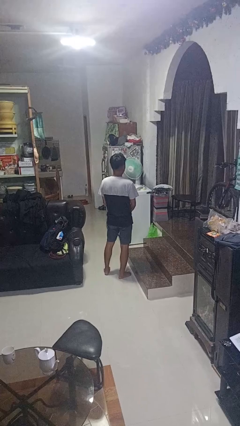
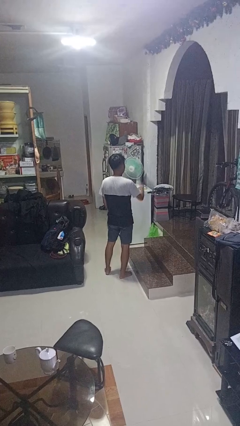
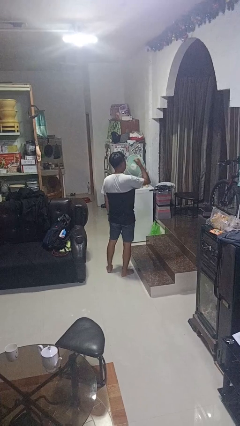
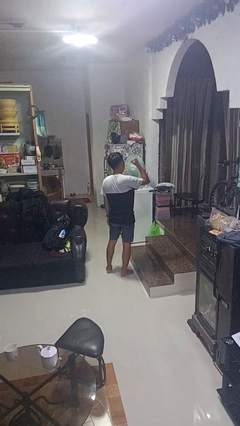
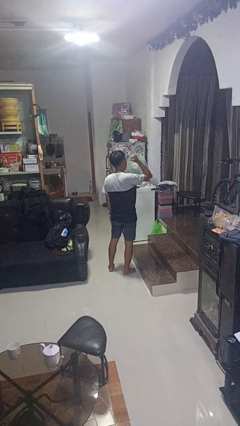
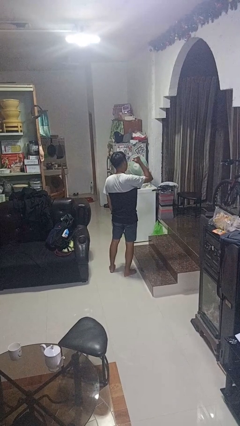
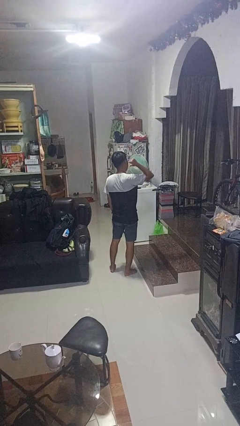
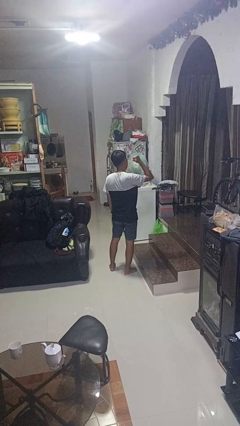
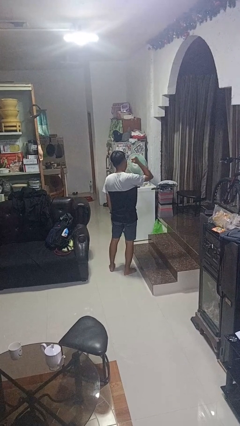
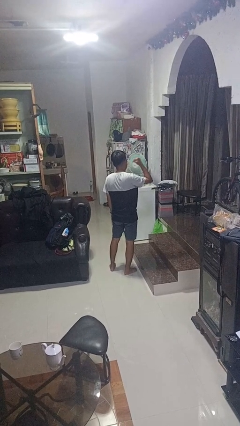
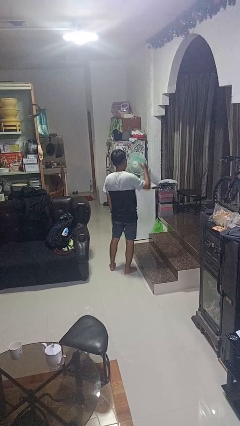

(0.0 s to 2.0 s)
person gestures behind me

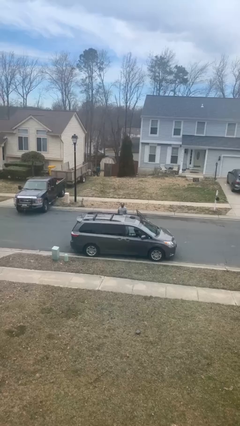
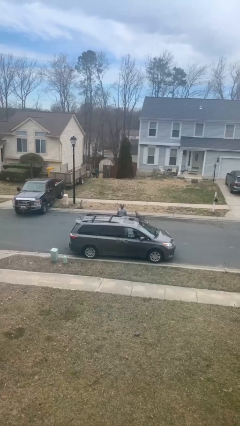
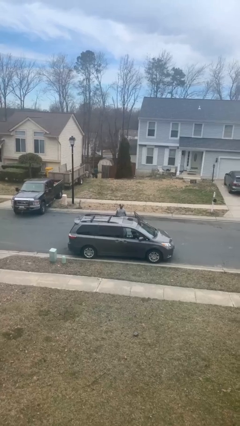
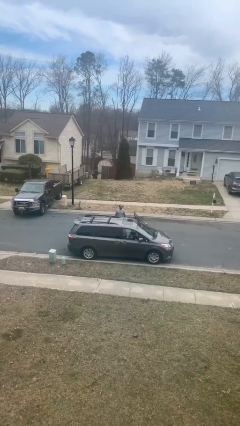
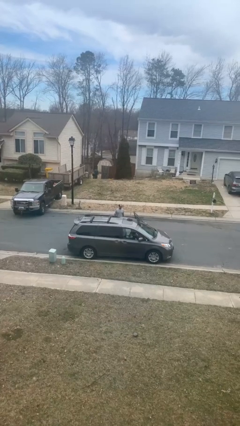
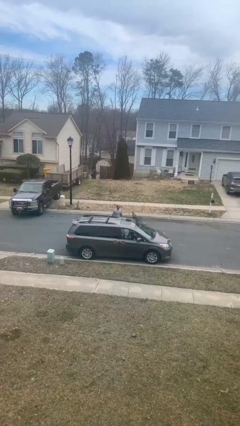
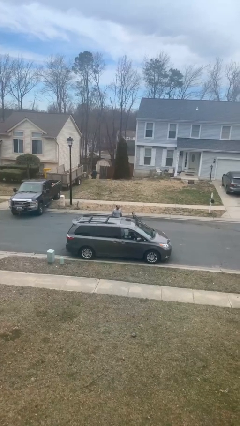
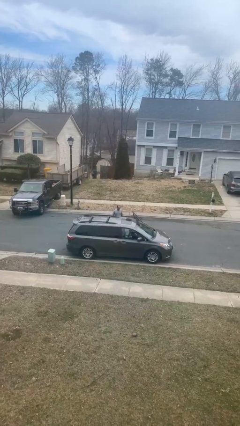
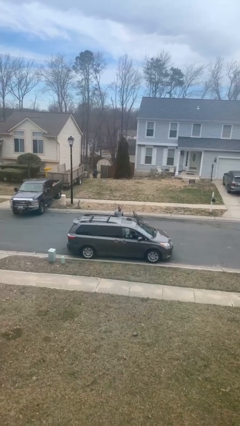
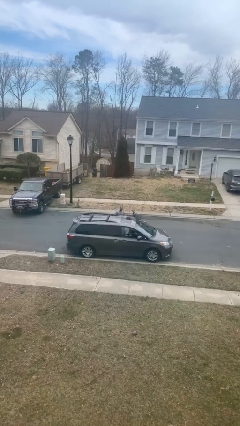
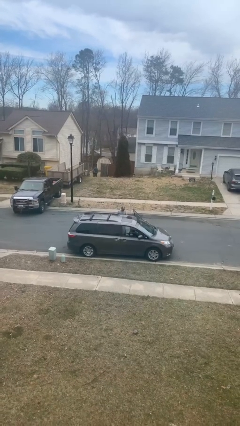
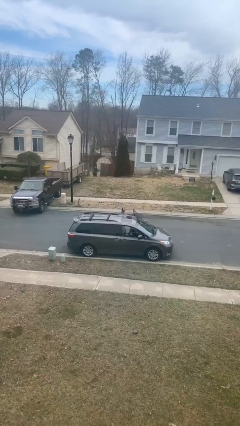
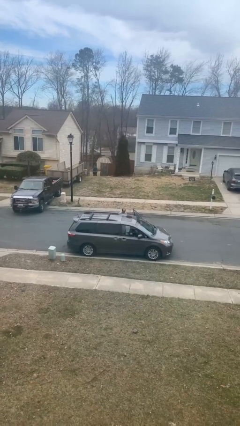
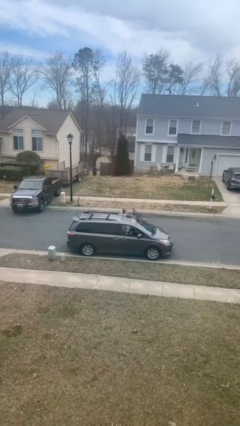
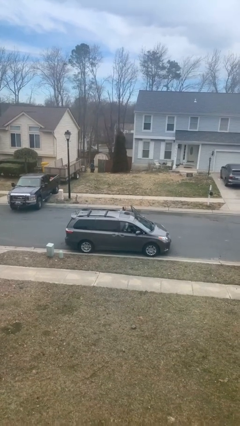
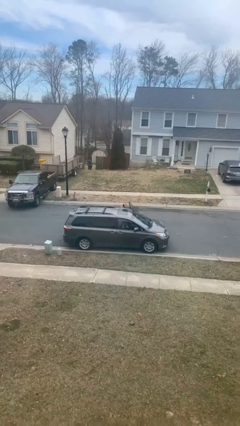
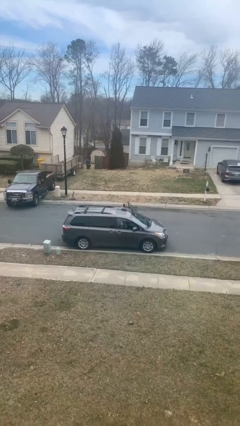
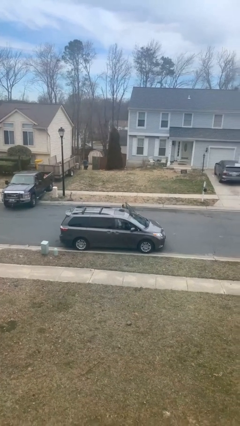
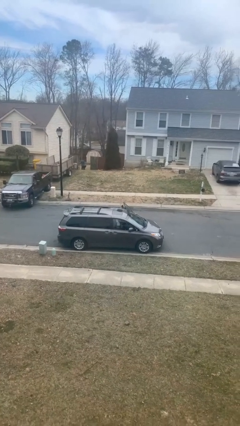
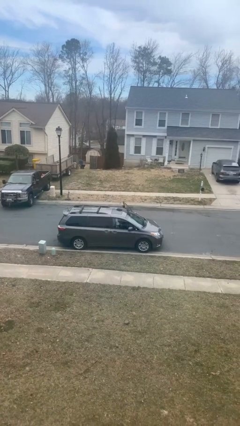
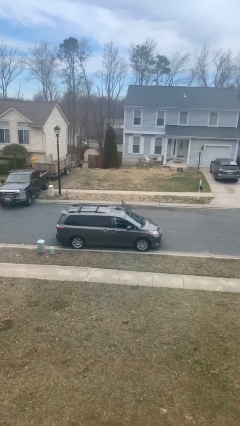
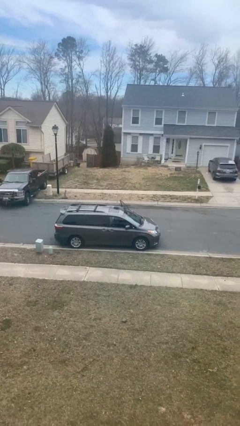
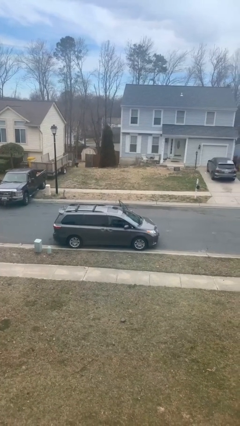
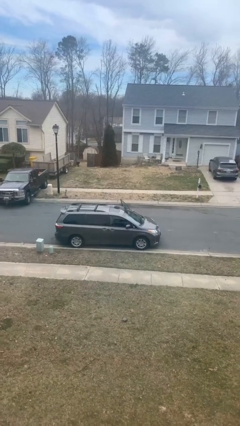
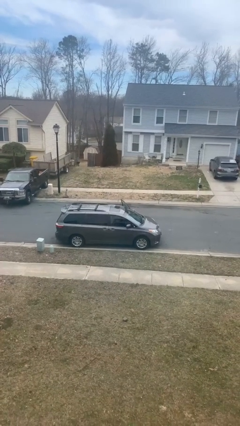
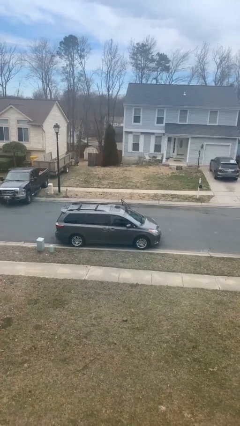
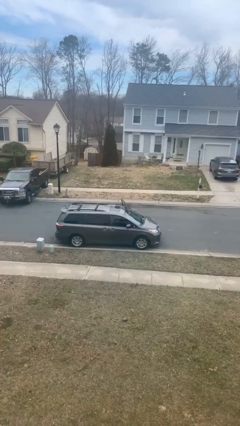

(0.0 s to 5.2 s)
person enters car

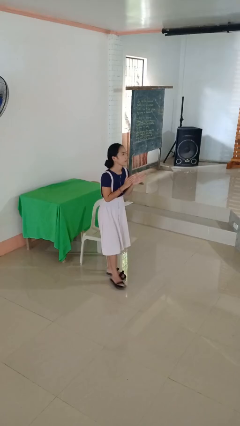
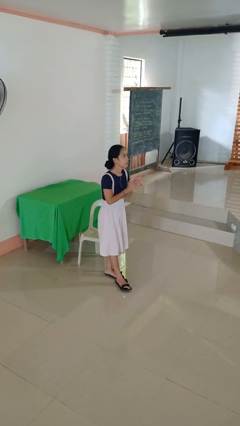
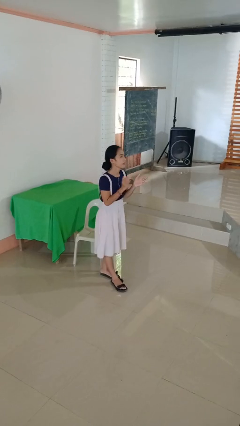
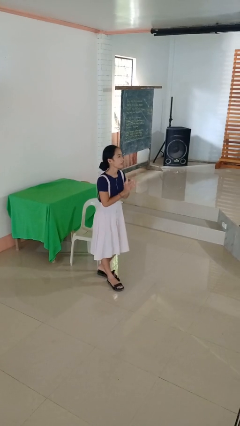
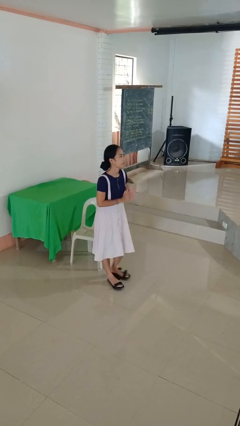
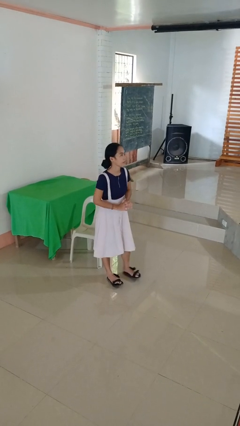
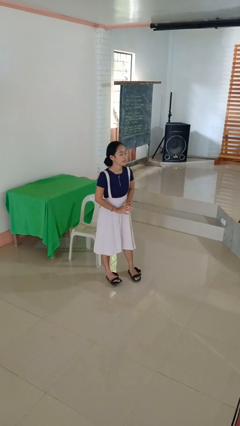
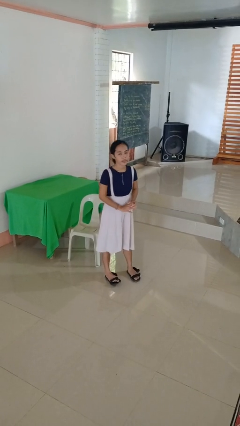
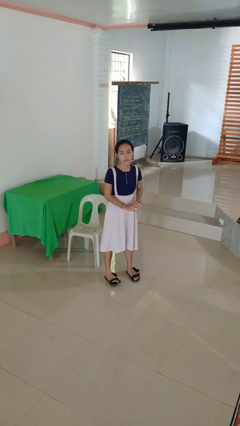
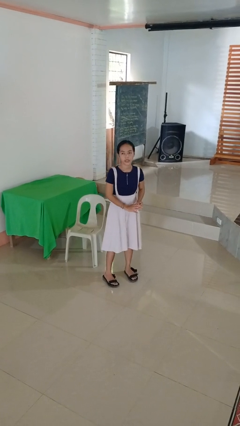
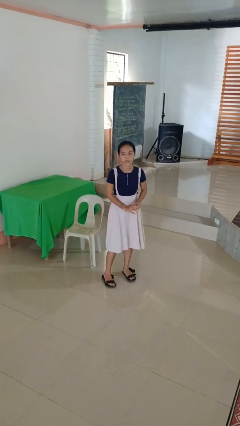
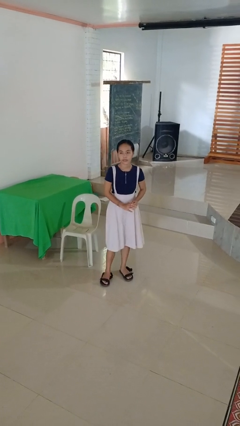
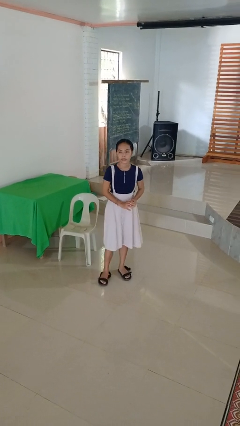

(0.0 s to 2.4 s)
person claps hands

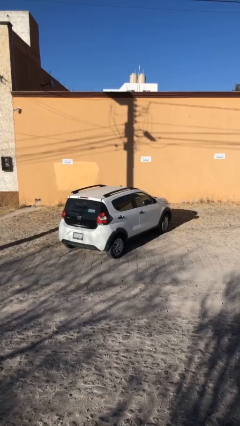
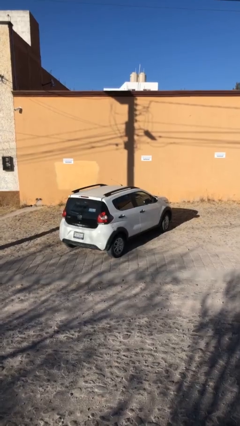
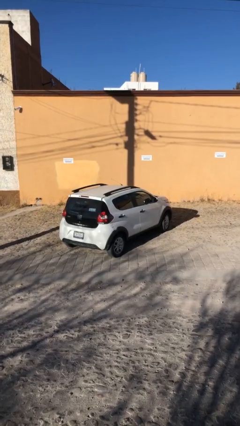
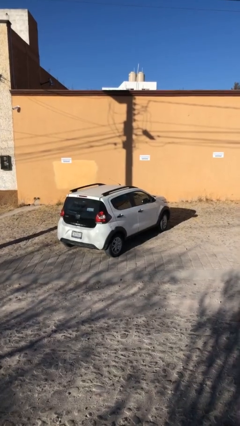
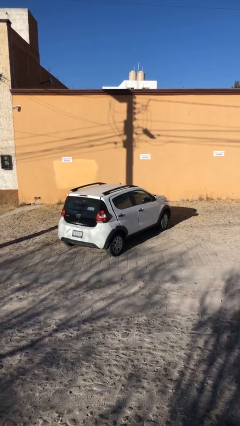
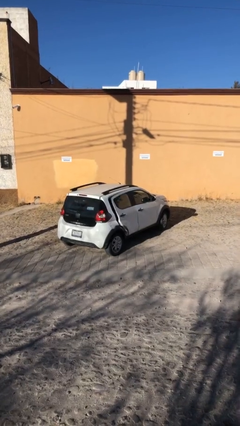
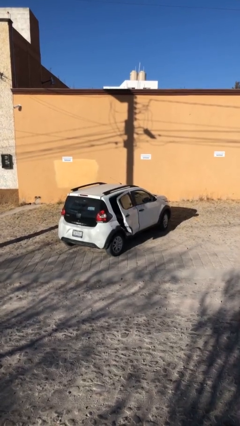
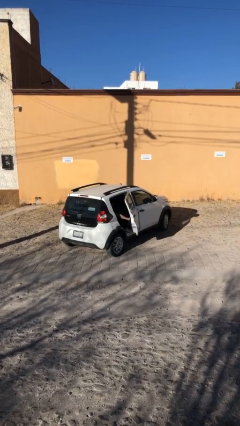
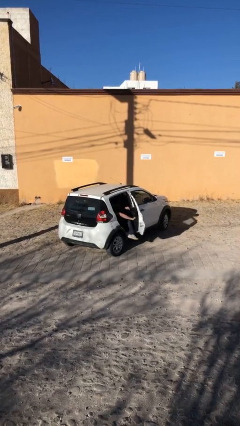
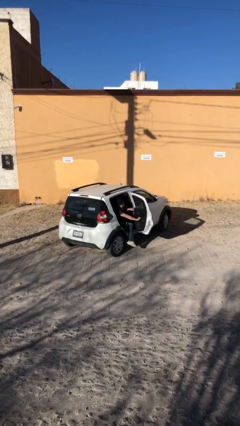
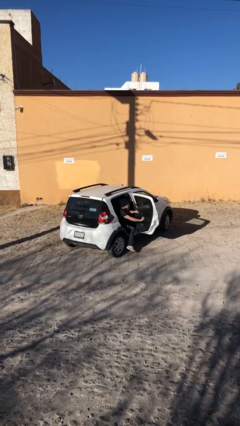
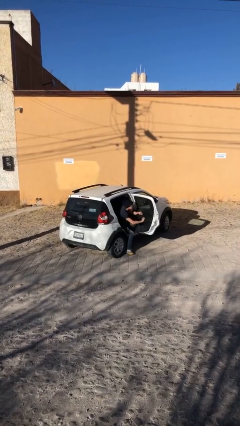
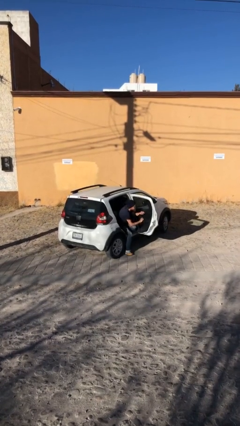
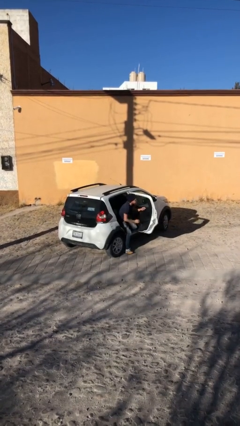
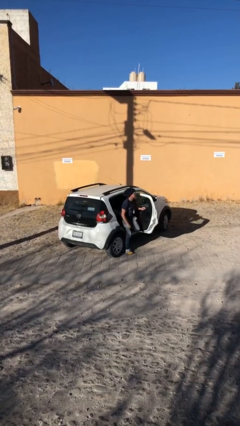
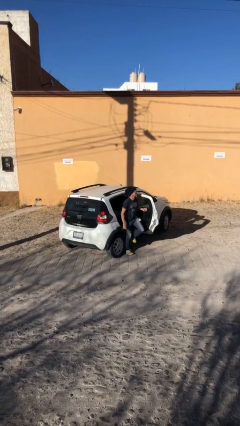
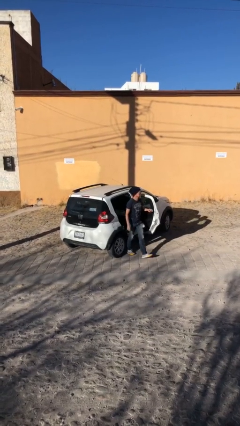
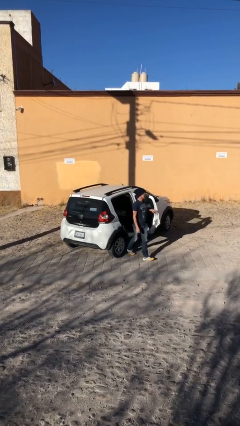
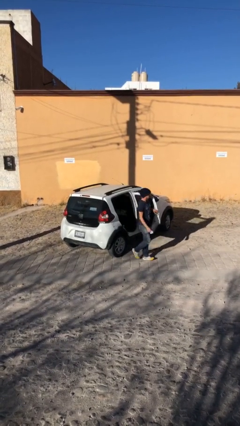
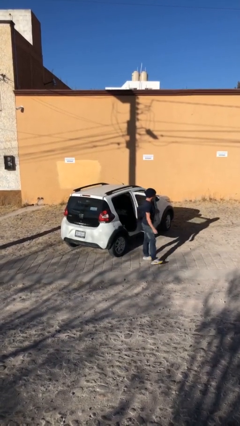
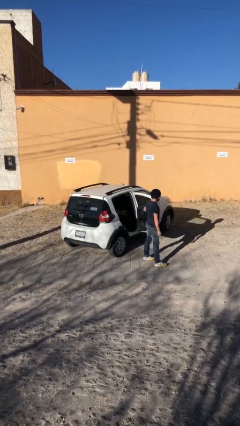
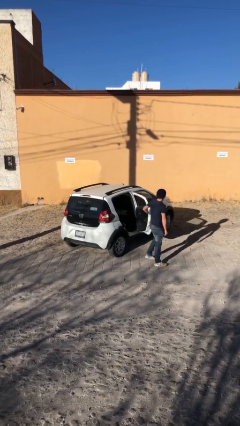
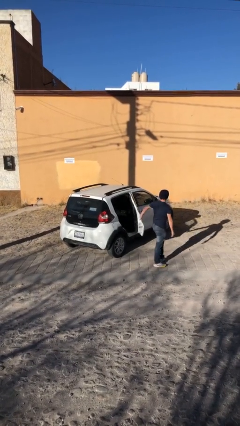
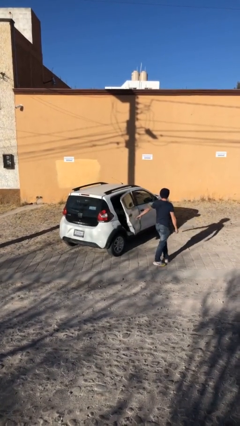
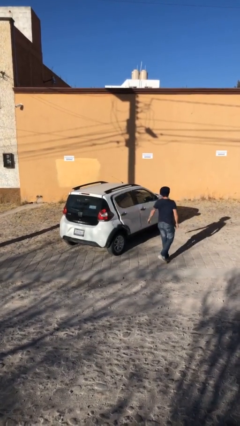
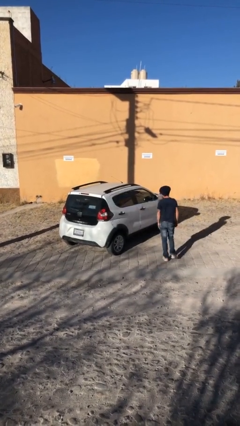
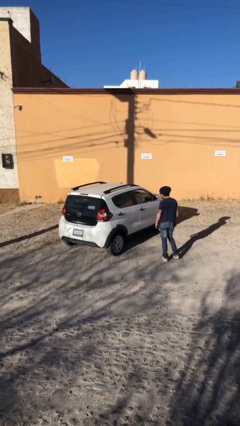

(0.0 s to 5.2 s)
car drops off person

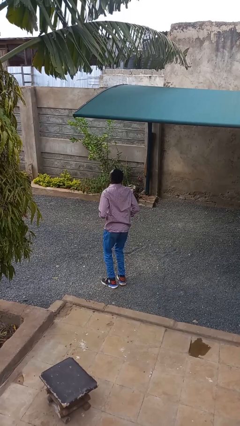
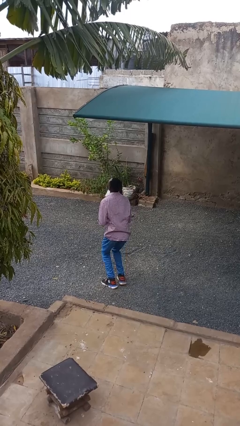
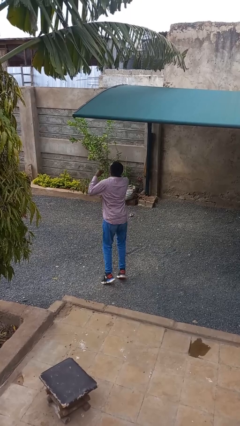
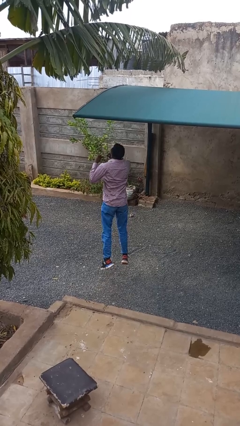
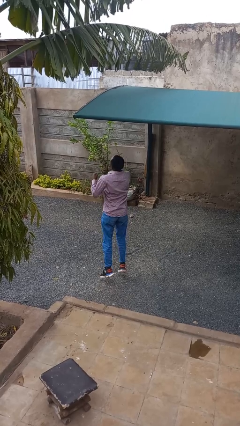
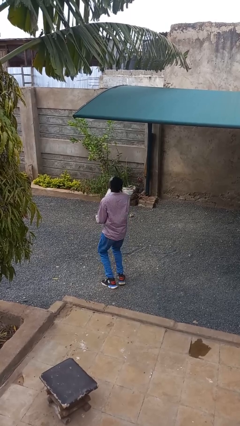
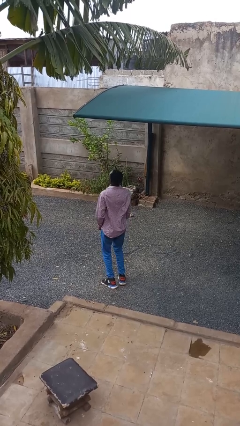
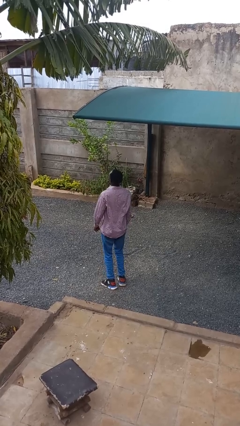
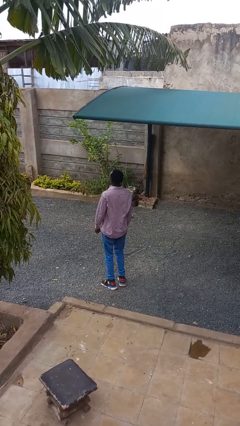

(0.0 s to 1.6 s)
person jumps

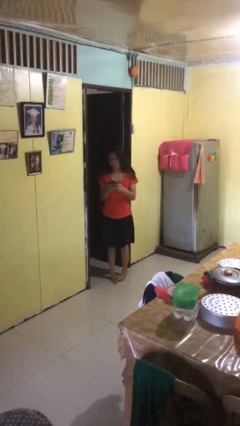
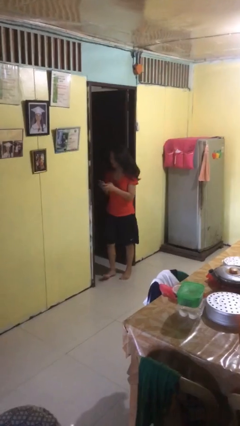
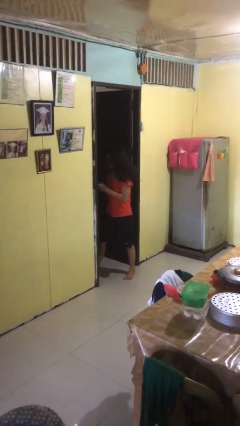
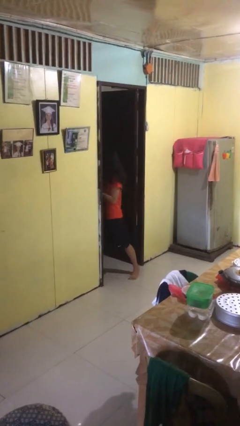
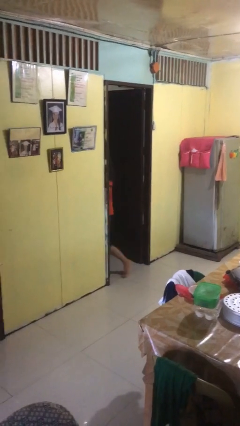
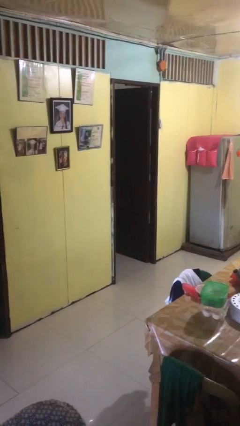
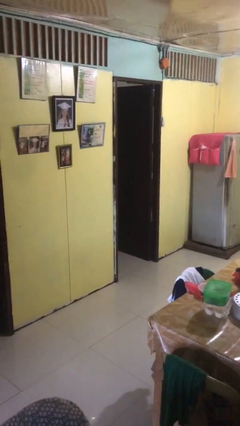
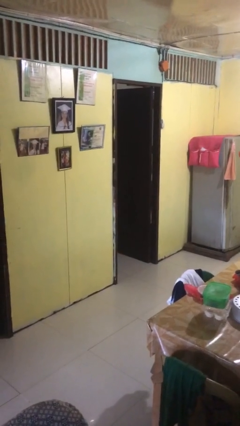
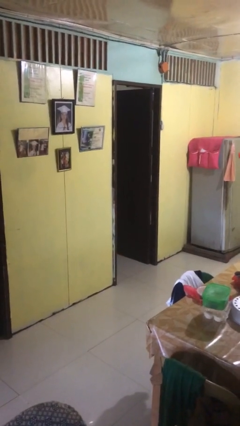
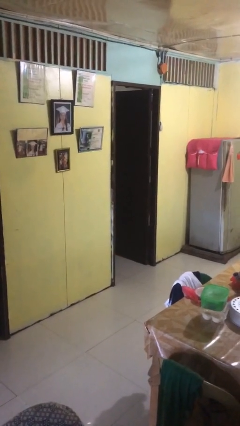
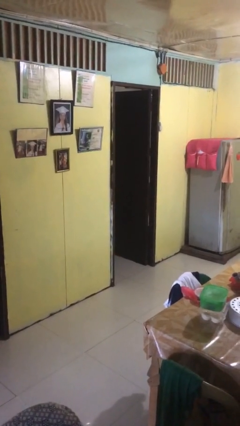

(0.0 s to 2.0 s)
person exits scene through structure
